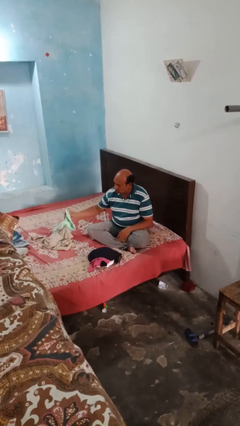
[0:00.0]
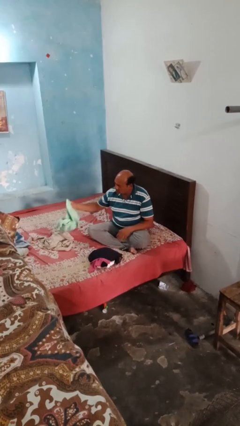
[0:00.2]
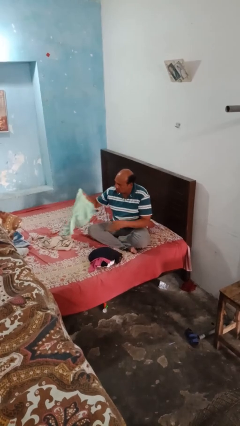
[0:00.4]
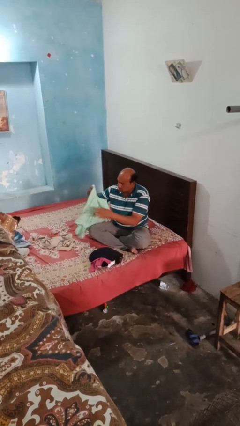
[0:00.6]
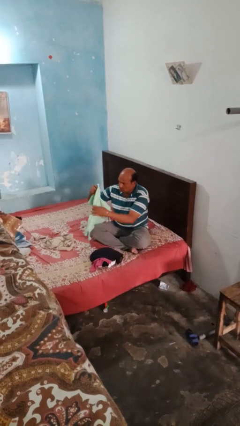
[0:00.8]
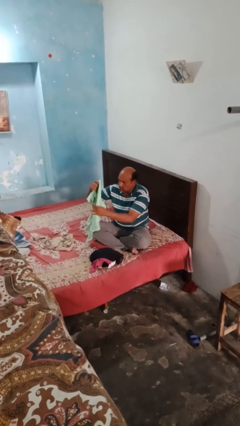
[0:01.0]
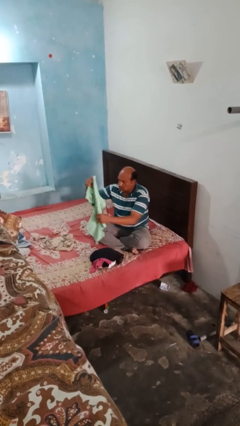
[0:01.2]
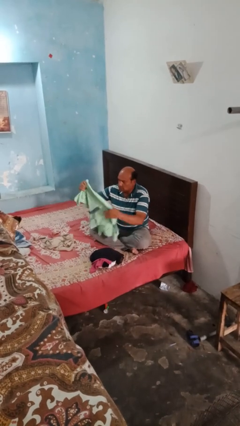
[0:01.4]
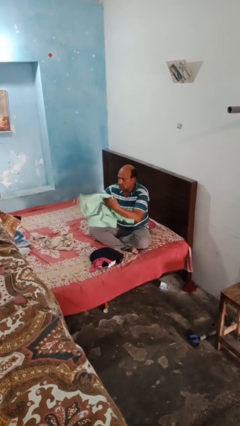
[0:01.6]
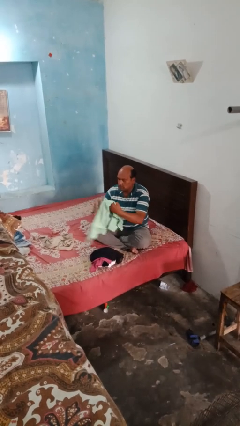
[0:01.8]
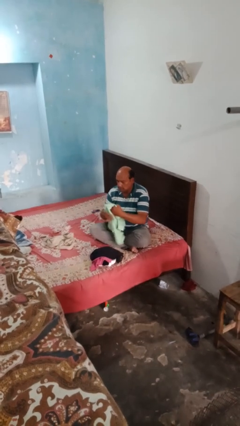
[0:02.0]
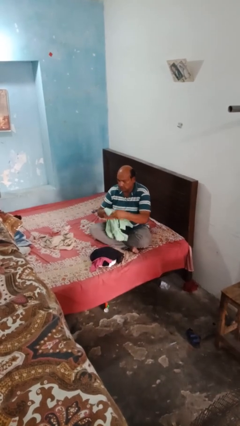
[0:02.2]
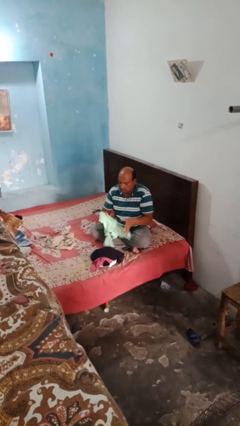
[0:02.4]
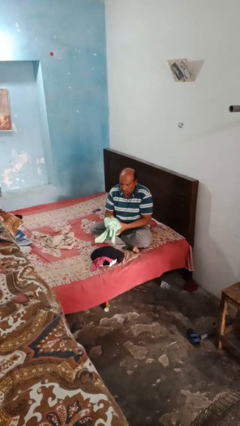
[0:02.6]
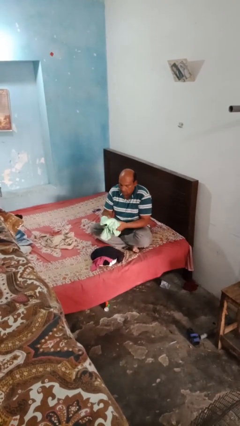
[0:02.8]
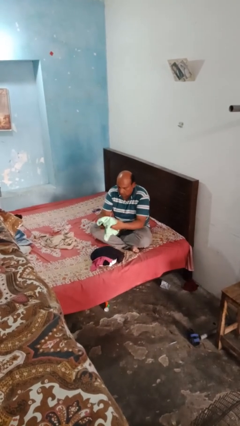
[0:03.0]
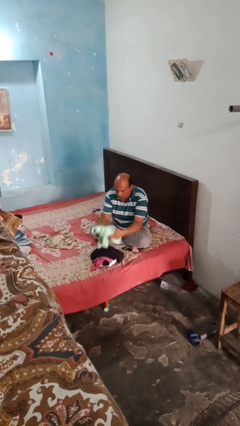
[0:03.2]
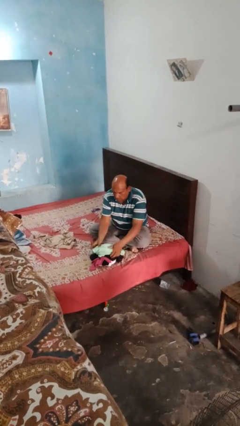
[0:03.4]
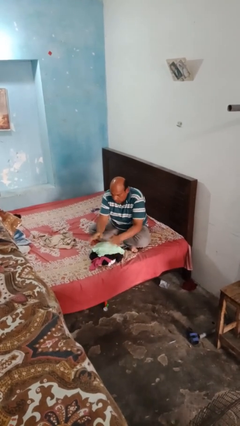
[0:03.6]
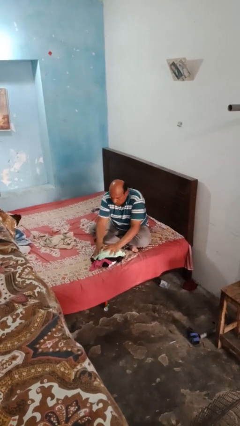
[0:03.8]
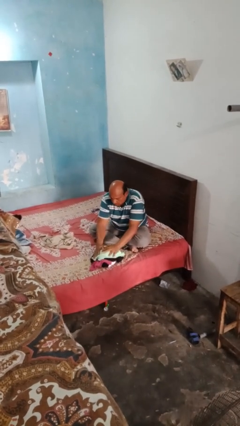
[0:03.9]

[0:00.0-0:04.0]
person folds shirt

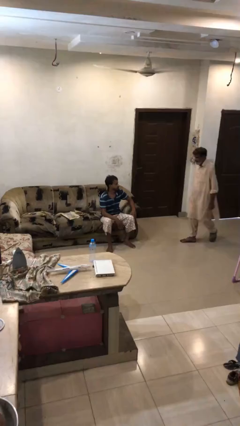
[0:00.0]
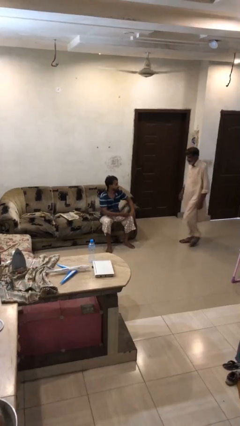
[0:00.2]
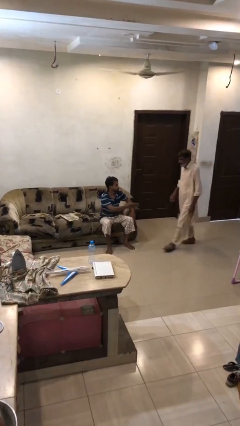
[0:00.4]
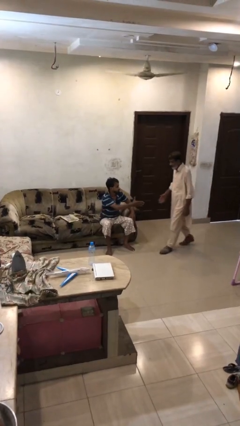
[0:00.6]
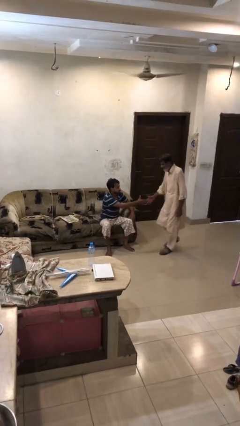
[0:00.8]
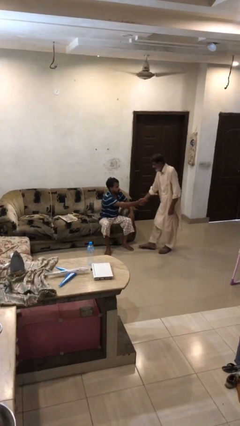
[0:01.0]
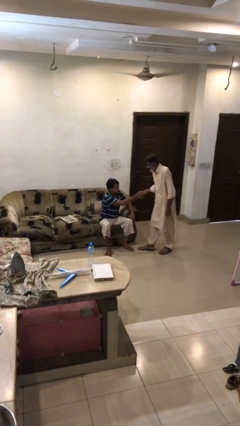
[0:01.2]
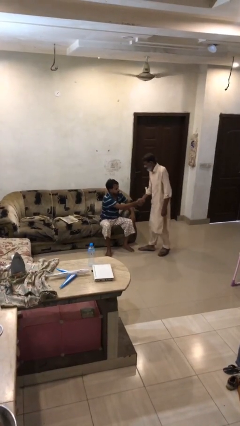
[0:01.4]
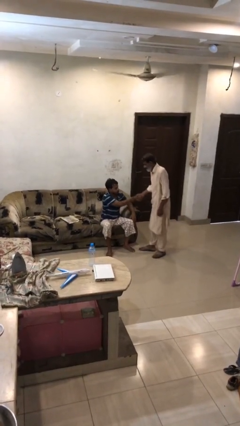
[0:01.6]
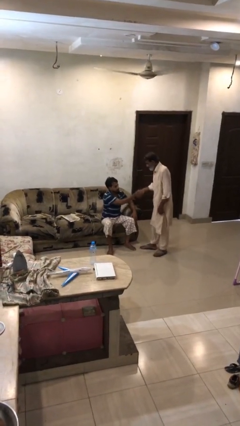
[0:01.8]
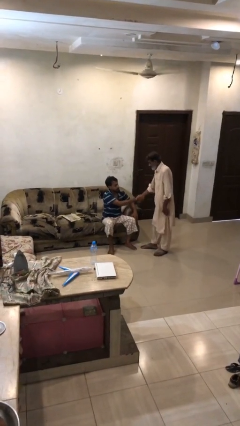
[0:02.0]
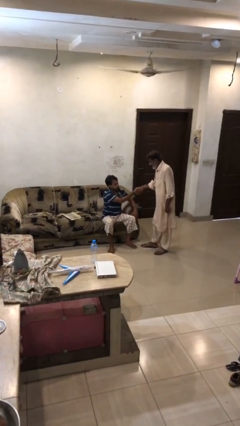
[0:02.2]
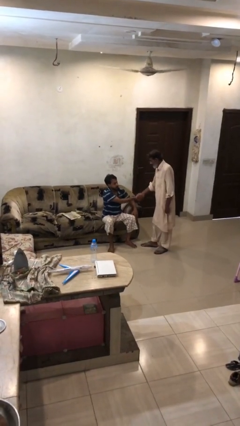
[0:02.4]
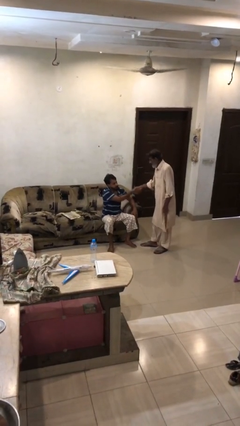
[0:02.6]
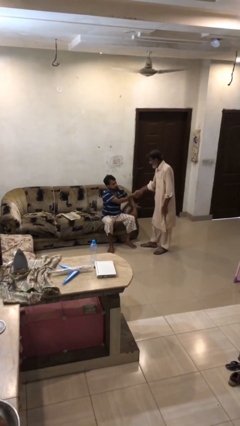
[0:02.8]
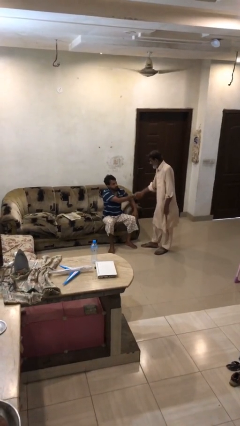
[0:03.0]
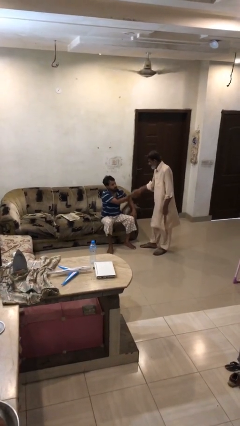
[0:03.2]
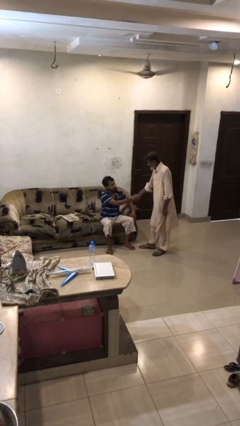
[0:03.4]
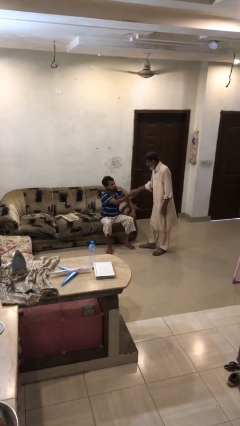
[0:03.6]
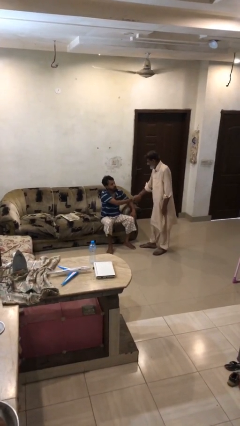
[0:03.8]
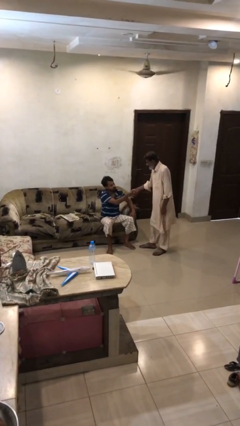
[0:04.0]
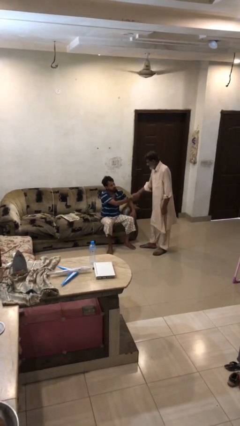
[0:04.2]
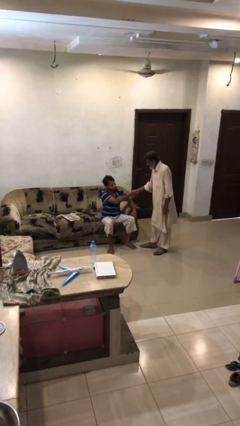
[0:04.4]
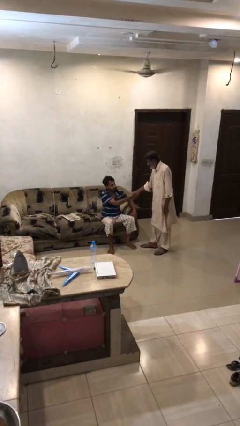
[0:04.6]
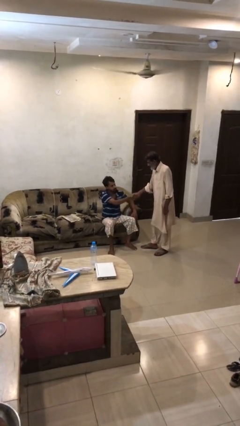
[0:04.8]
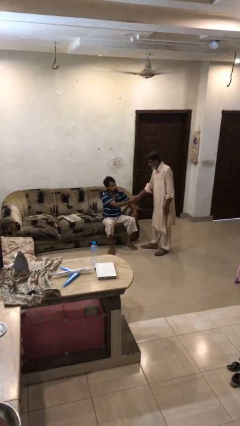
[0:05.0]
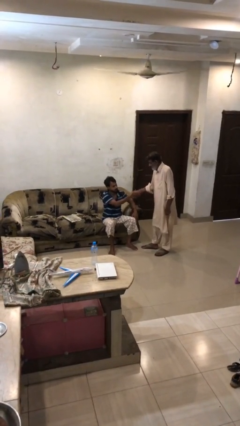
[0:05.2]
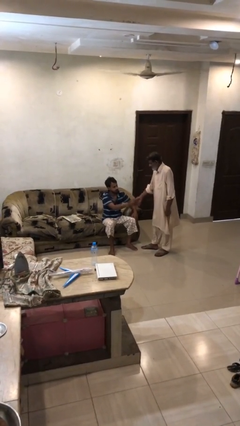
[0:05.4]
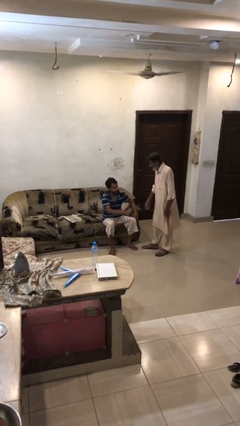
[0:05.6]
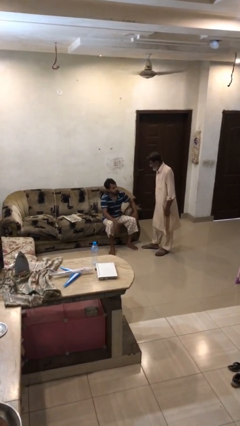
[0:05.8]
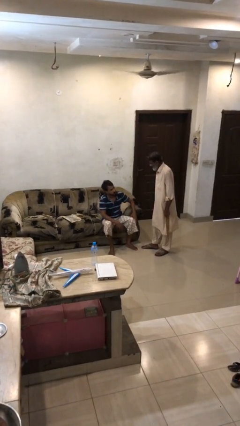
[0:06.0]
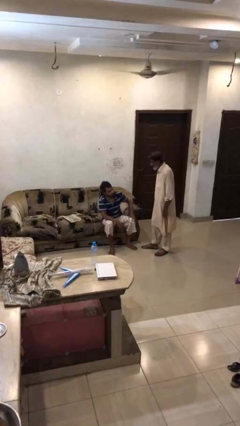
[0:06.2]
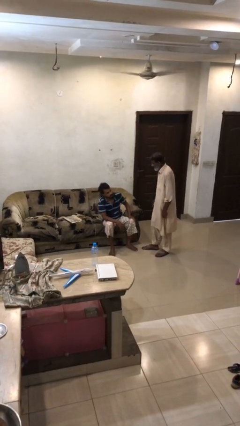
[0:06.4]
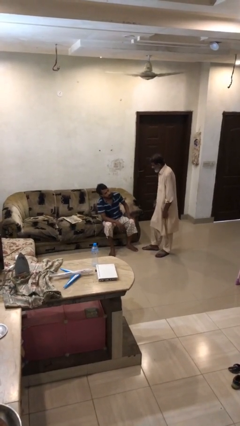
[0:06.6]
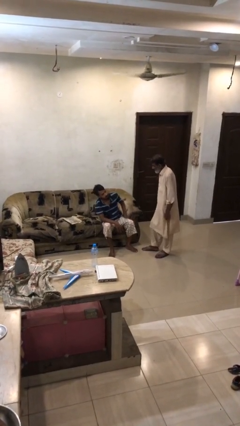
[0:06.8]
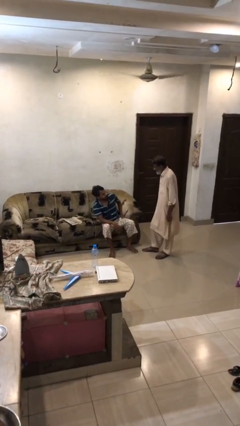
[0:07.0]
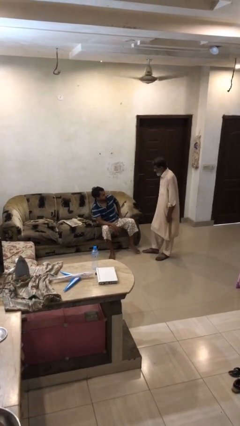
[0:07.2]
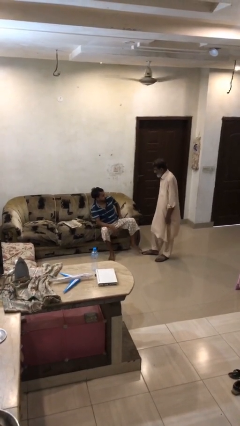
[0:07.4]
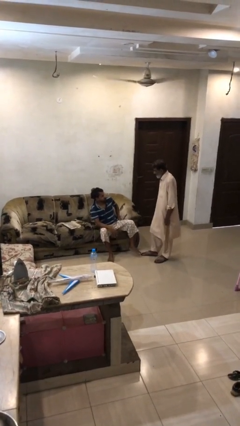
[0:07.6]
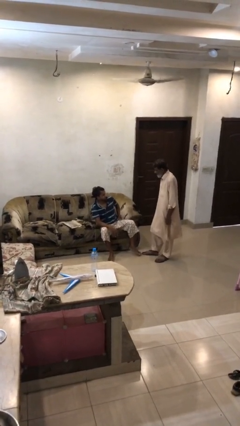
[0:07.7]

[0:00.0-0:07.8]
person shakes hand

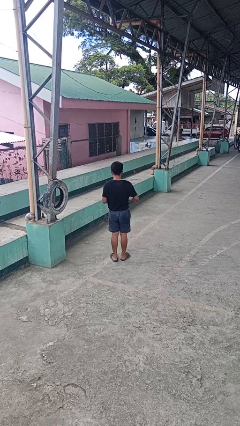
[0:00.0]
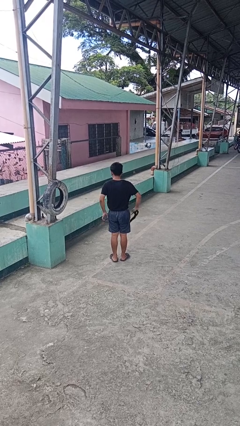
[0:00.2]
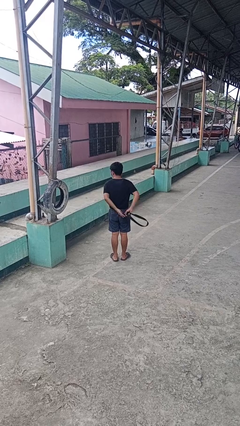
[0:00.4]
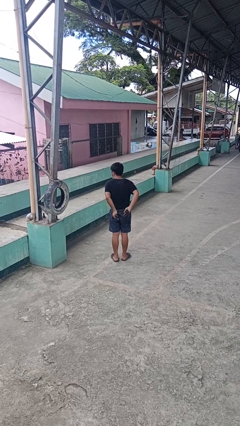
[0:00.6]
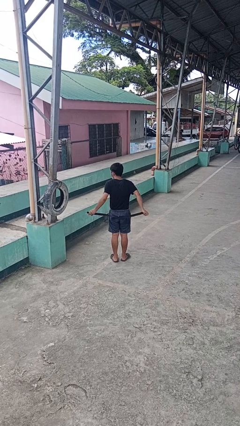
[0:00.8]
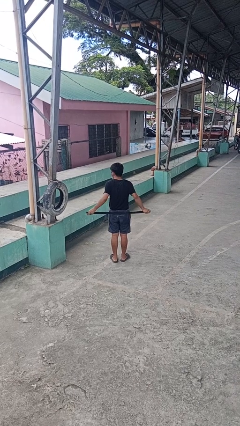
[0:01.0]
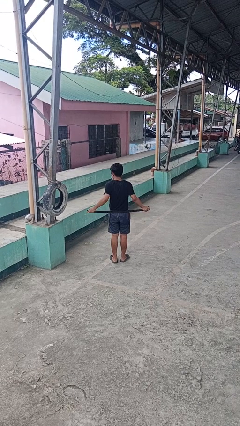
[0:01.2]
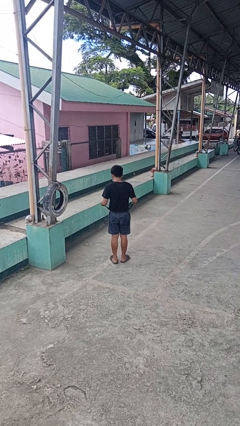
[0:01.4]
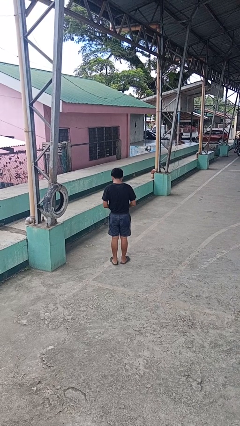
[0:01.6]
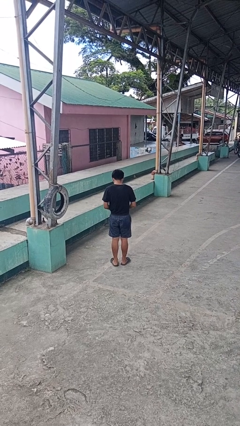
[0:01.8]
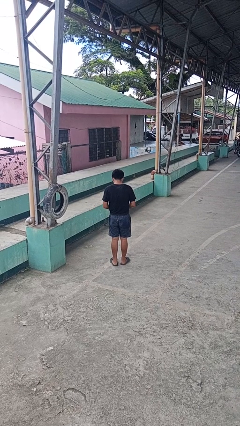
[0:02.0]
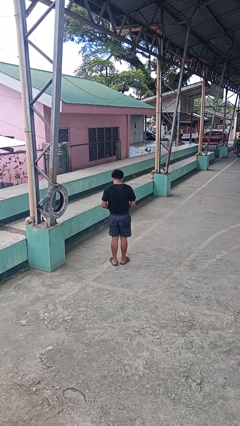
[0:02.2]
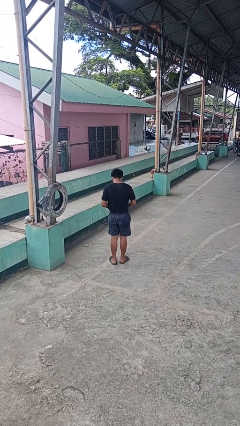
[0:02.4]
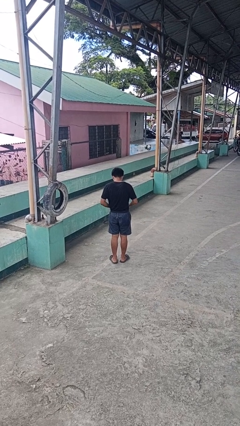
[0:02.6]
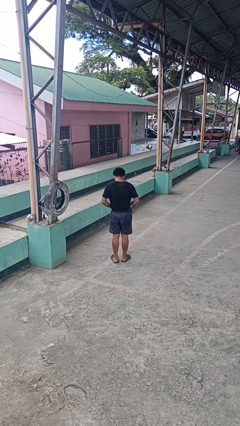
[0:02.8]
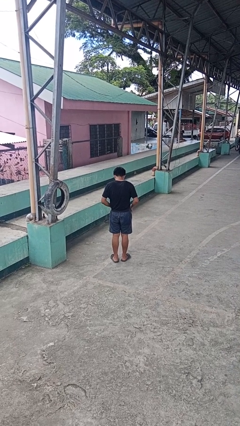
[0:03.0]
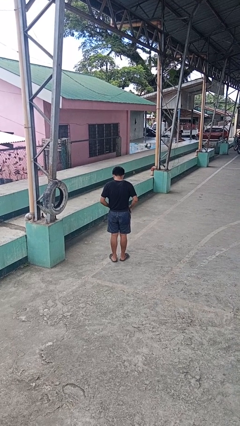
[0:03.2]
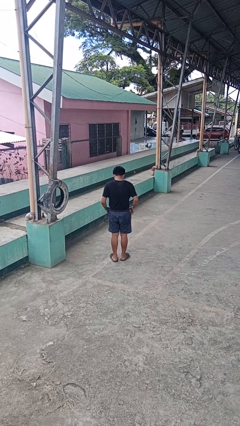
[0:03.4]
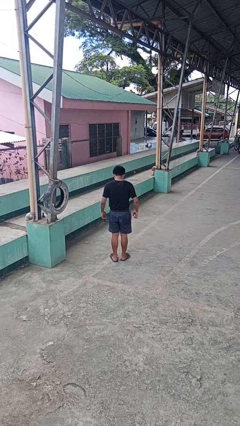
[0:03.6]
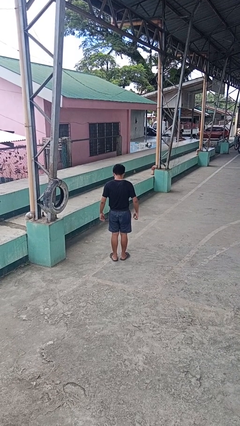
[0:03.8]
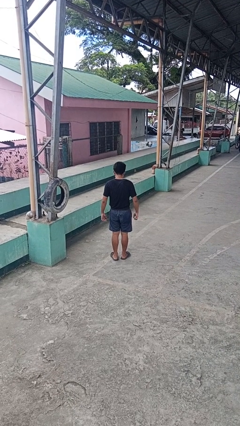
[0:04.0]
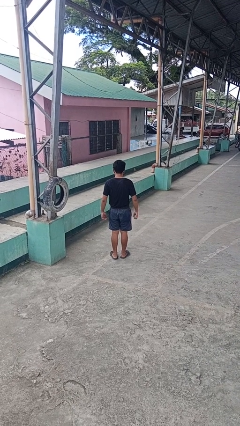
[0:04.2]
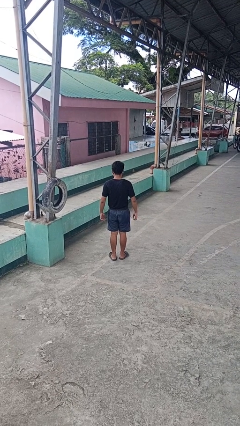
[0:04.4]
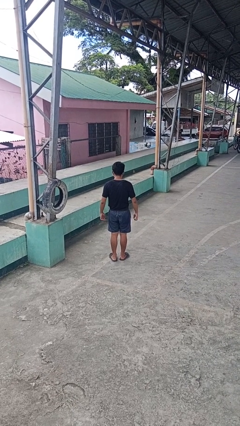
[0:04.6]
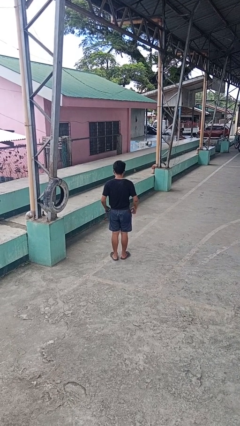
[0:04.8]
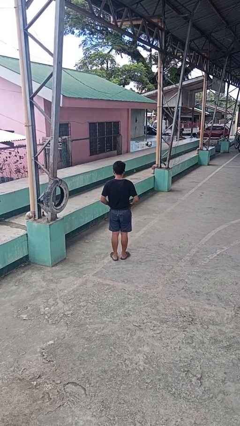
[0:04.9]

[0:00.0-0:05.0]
person puts on belt

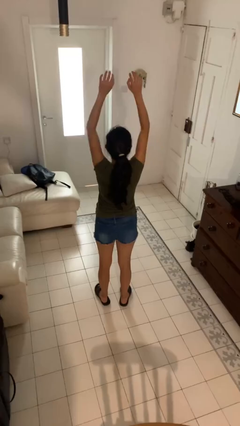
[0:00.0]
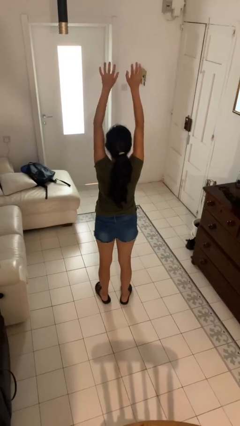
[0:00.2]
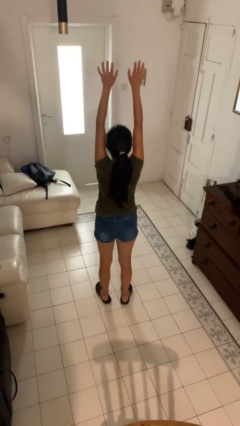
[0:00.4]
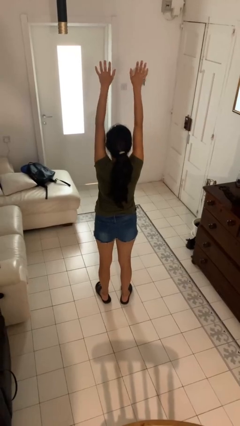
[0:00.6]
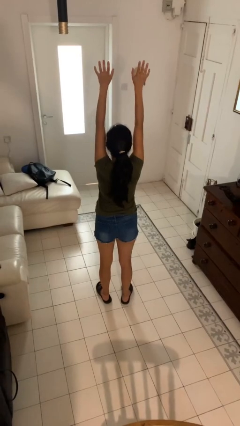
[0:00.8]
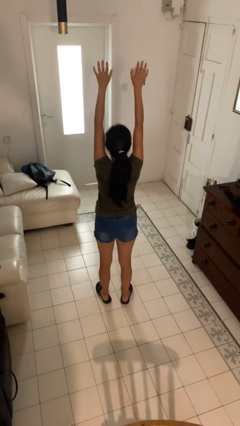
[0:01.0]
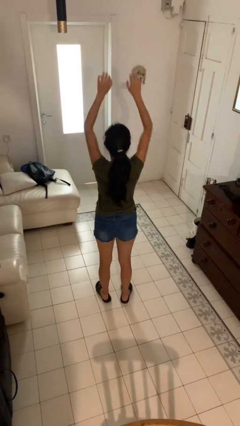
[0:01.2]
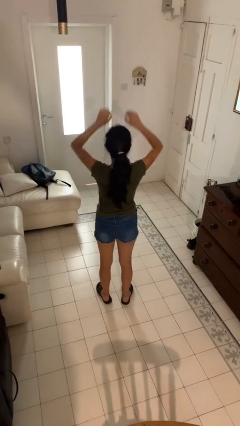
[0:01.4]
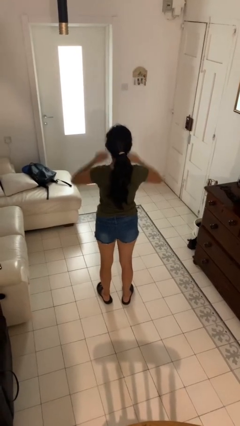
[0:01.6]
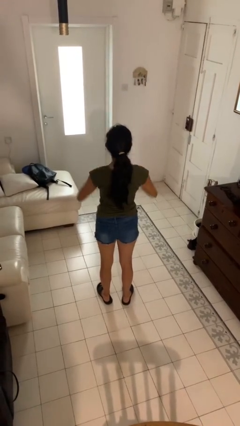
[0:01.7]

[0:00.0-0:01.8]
person stretches arms over head
